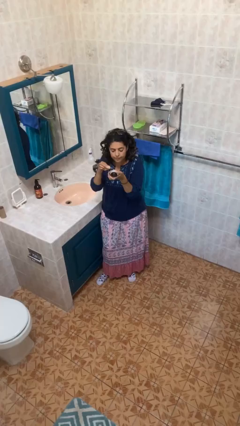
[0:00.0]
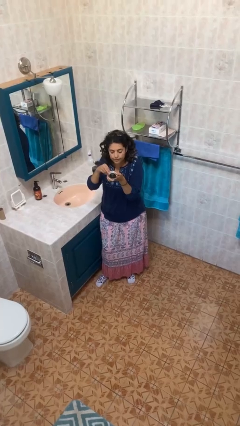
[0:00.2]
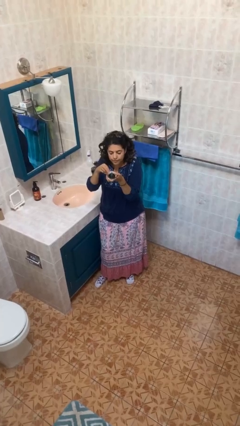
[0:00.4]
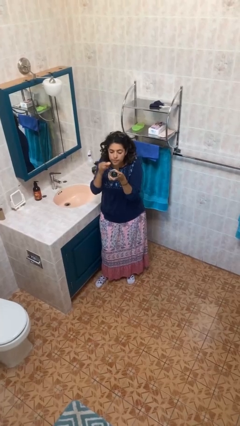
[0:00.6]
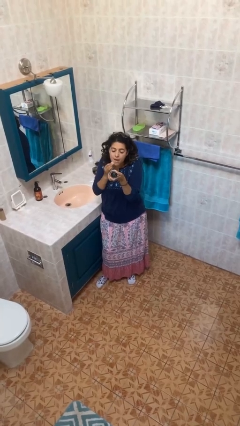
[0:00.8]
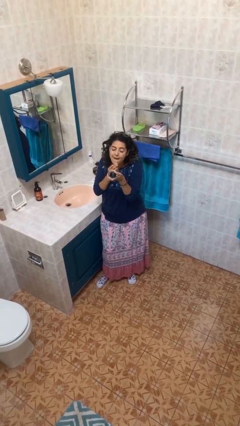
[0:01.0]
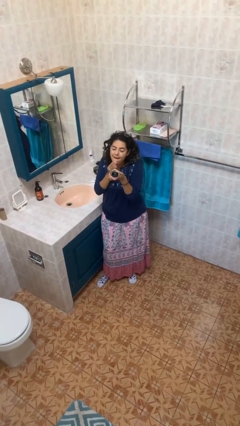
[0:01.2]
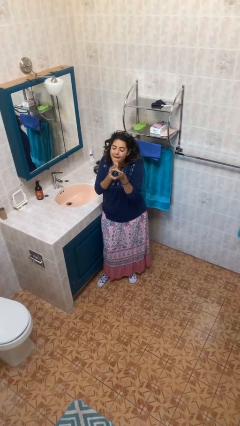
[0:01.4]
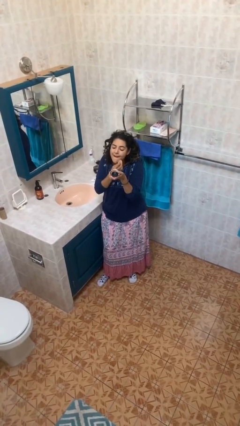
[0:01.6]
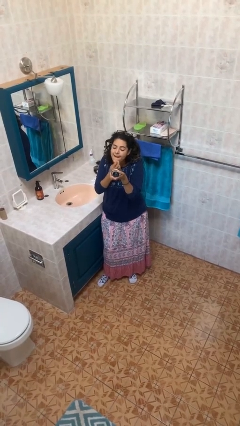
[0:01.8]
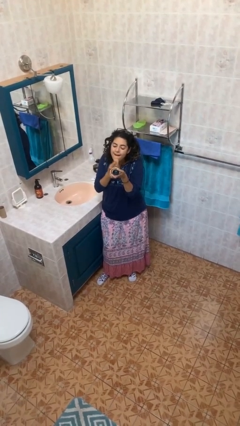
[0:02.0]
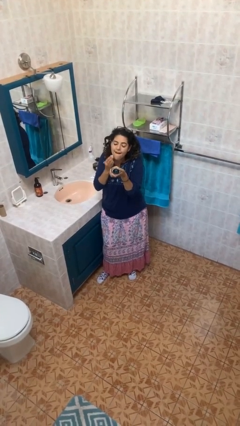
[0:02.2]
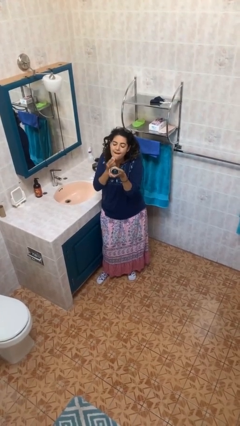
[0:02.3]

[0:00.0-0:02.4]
person applies foundation makeup

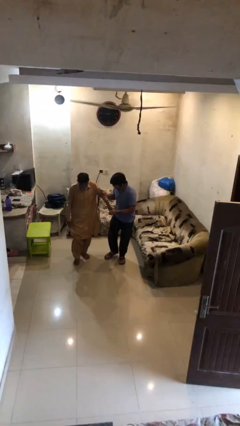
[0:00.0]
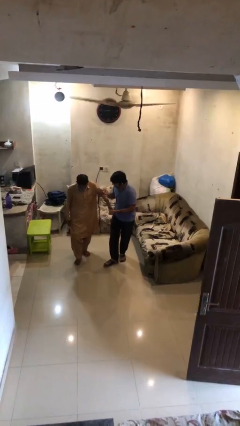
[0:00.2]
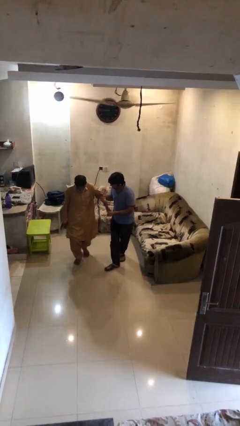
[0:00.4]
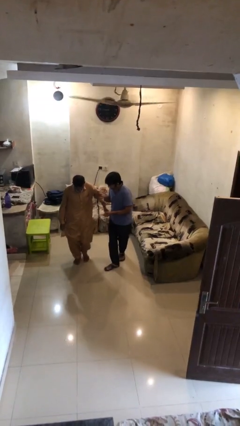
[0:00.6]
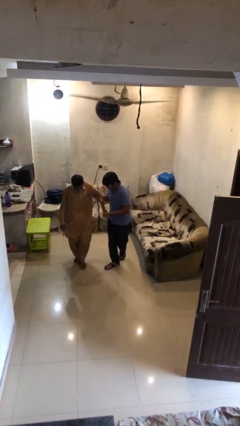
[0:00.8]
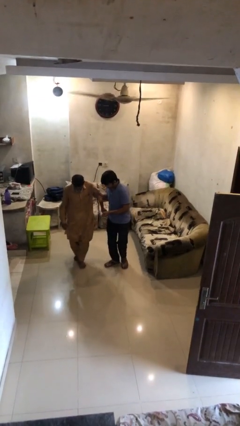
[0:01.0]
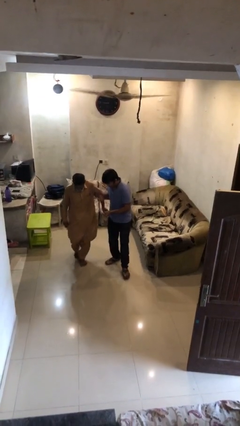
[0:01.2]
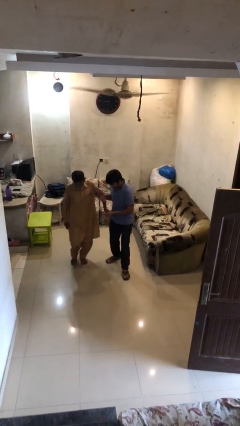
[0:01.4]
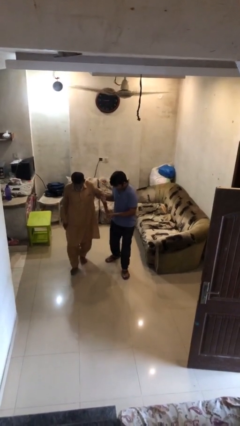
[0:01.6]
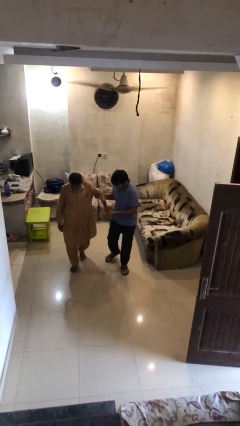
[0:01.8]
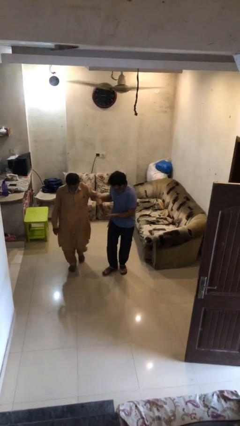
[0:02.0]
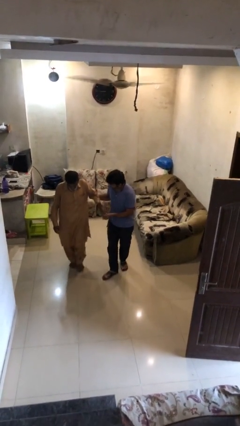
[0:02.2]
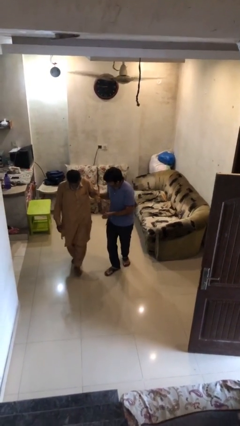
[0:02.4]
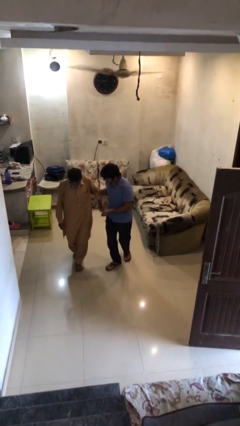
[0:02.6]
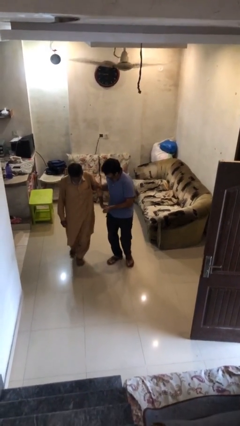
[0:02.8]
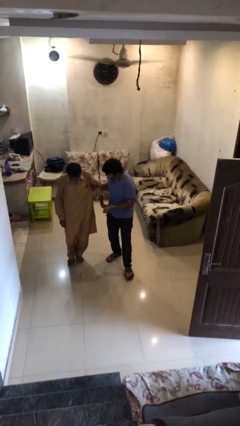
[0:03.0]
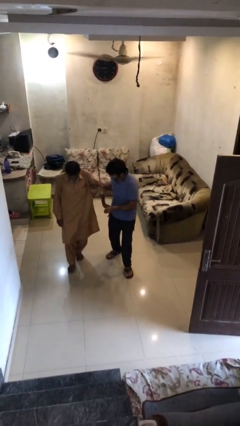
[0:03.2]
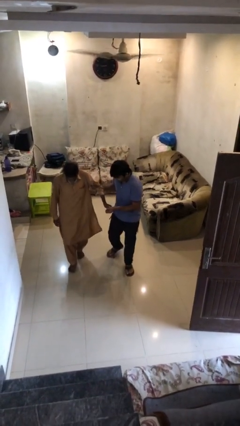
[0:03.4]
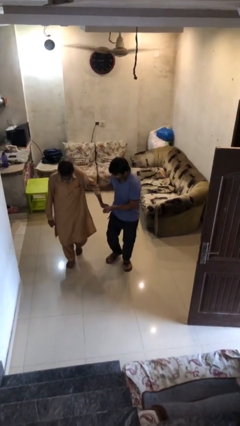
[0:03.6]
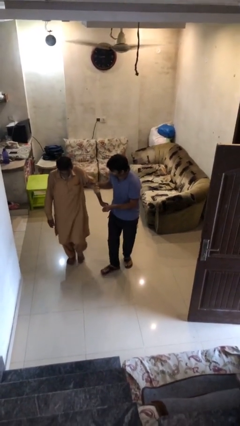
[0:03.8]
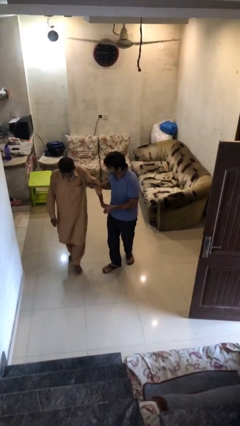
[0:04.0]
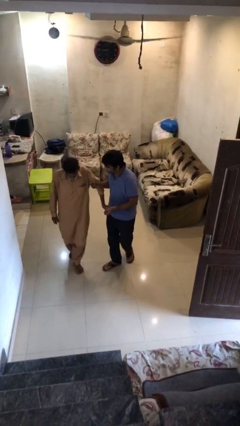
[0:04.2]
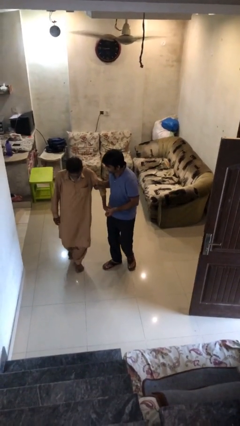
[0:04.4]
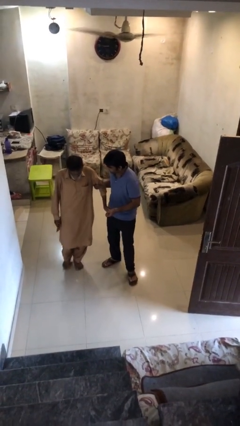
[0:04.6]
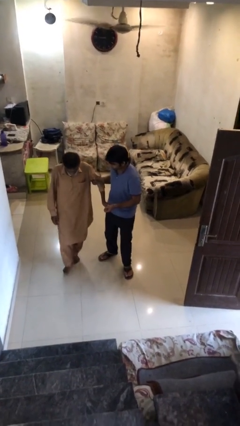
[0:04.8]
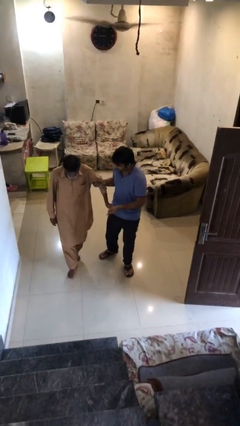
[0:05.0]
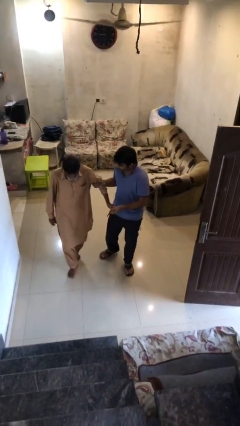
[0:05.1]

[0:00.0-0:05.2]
person holds hand

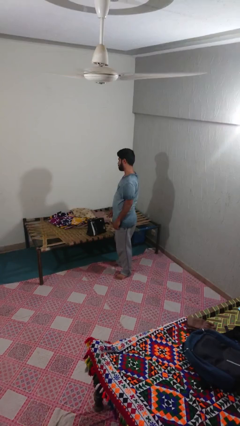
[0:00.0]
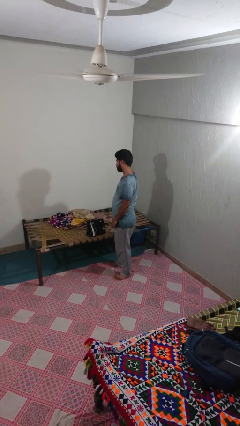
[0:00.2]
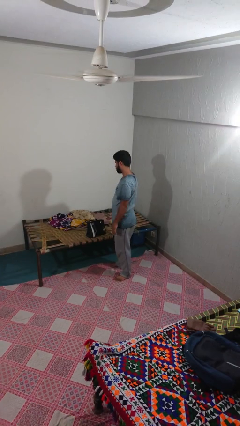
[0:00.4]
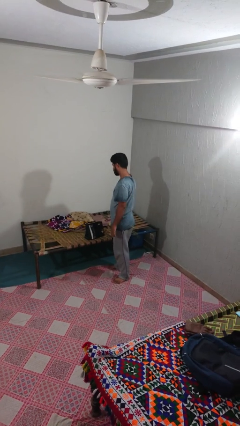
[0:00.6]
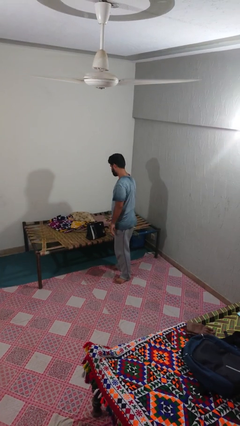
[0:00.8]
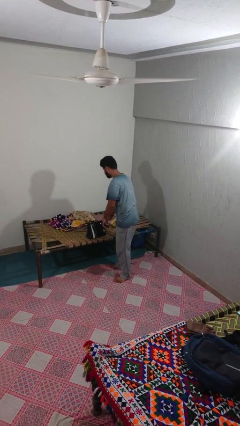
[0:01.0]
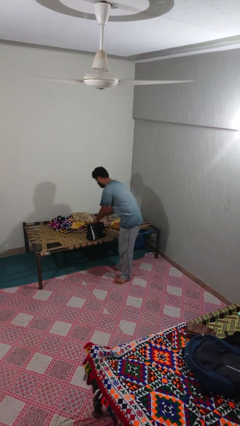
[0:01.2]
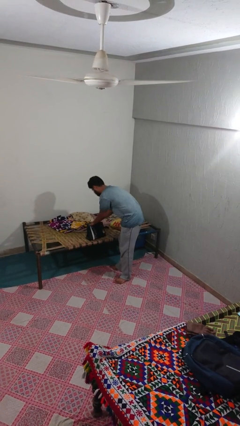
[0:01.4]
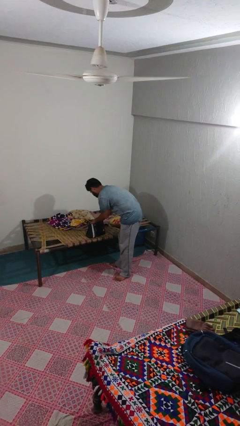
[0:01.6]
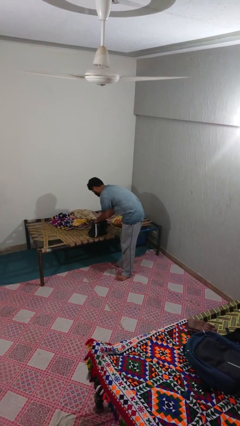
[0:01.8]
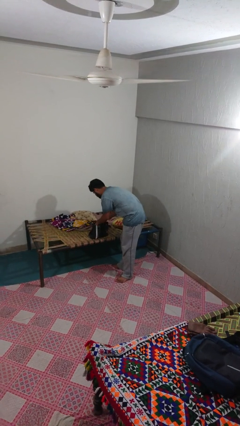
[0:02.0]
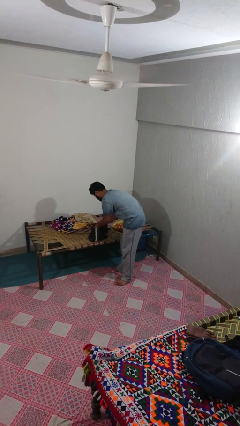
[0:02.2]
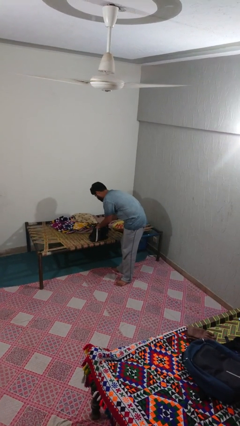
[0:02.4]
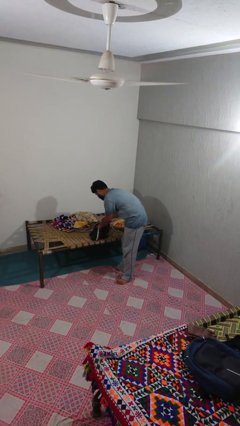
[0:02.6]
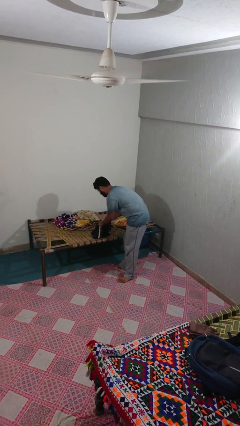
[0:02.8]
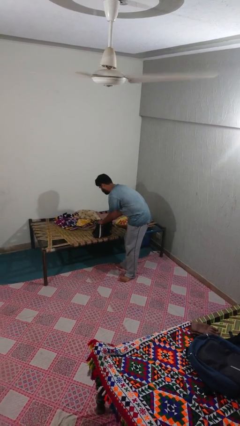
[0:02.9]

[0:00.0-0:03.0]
person searches in purse

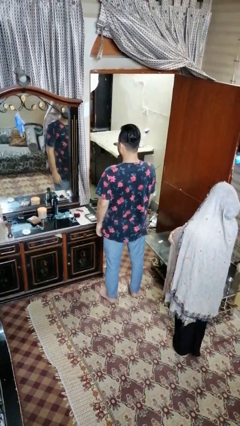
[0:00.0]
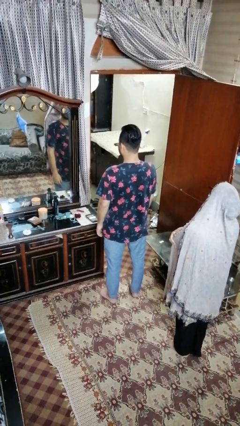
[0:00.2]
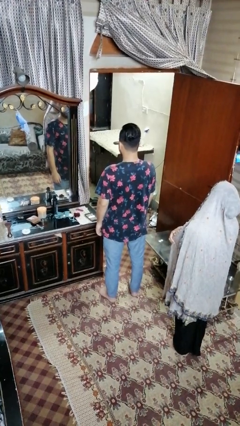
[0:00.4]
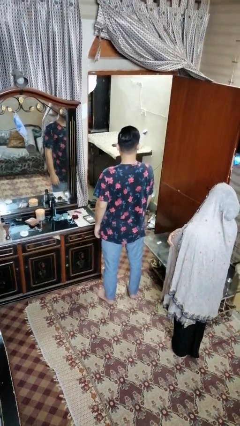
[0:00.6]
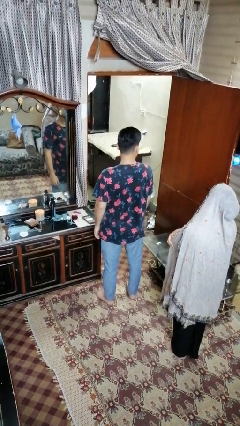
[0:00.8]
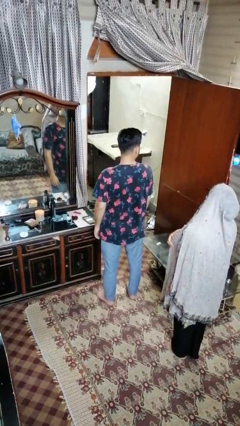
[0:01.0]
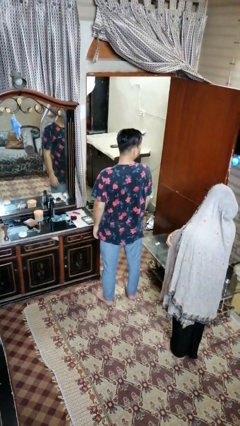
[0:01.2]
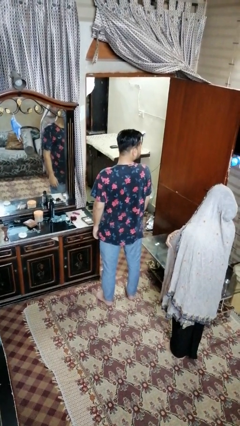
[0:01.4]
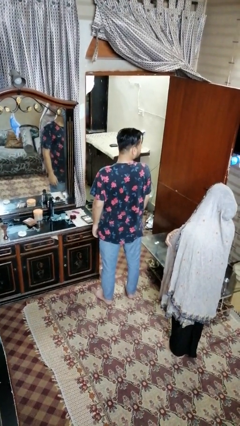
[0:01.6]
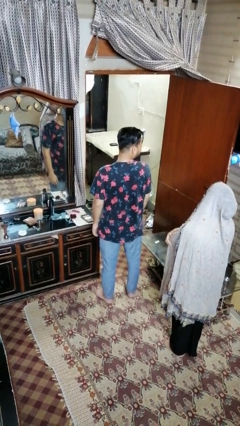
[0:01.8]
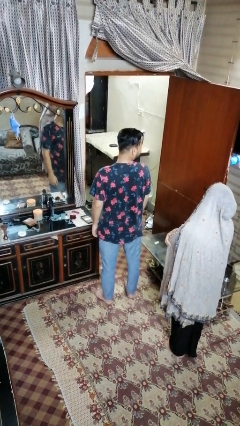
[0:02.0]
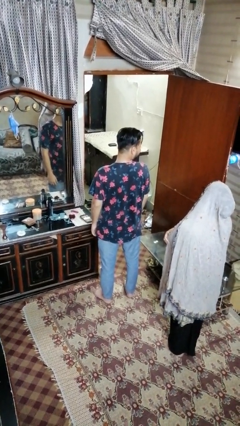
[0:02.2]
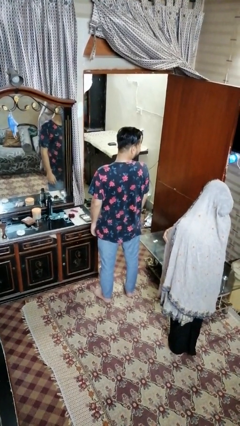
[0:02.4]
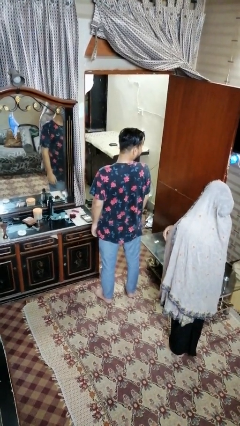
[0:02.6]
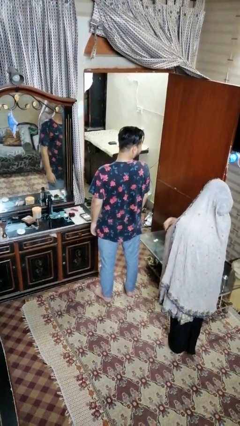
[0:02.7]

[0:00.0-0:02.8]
person looks over shoulder

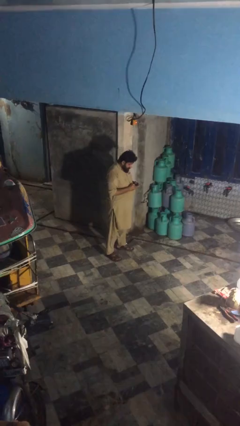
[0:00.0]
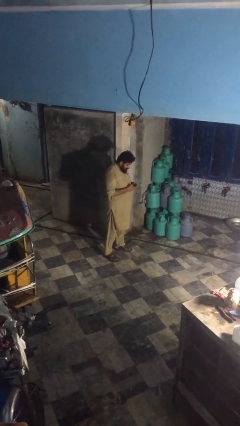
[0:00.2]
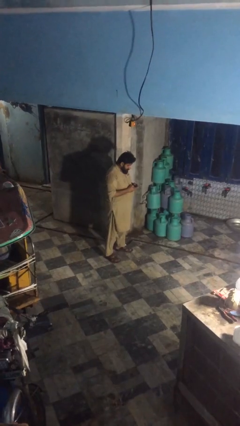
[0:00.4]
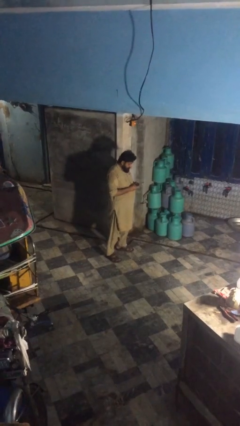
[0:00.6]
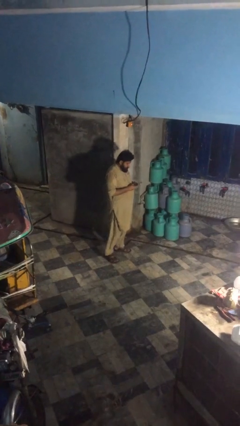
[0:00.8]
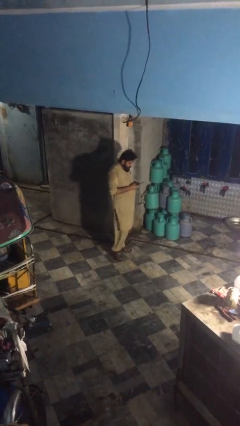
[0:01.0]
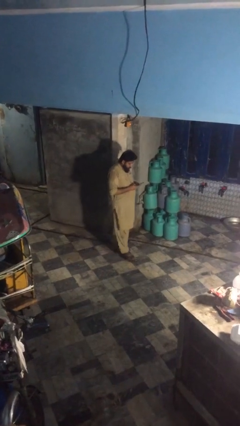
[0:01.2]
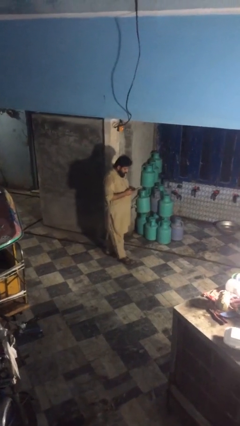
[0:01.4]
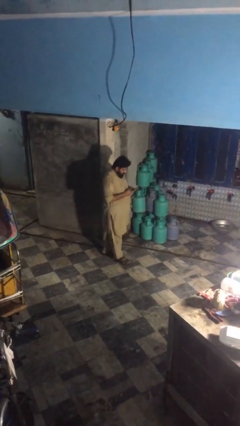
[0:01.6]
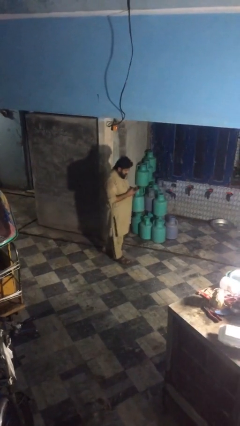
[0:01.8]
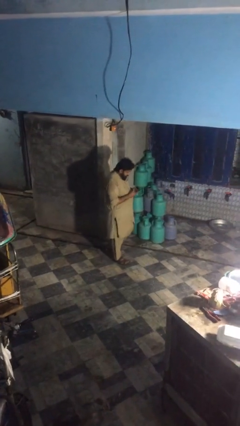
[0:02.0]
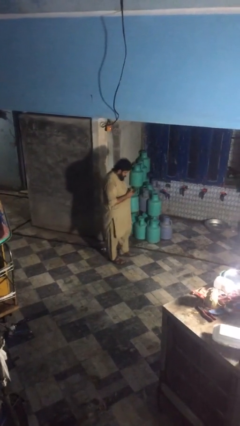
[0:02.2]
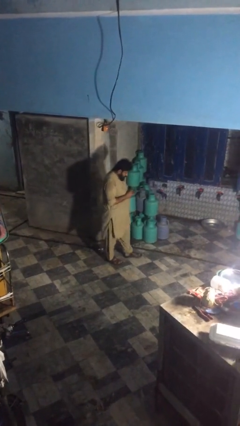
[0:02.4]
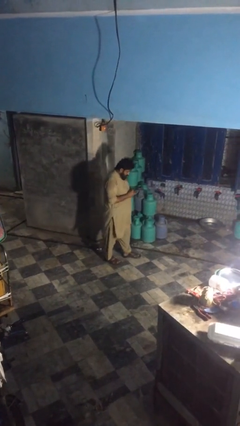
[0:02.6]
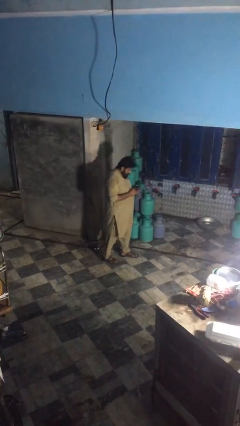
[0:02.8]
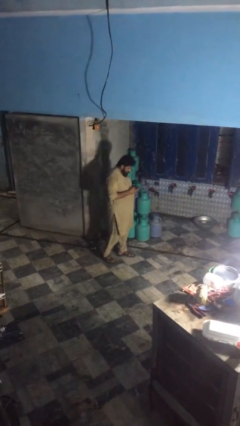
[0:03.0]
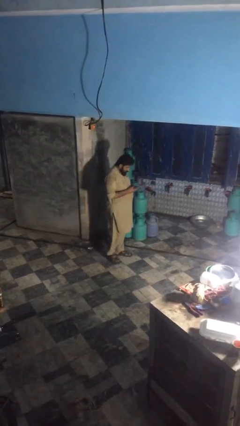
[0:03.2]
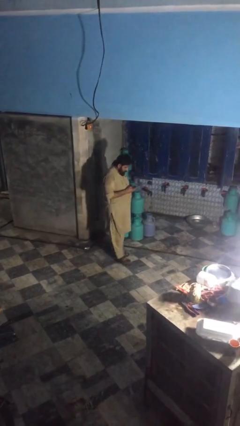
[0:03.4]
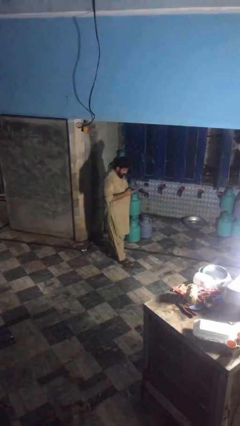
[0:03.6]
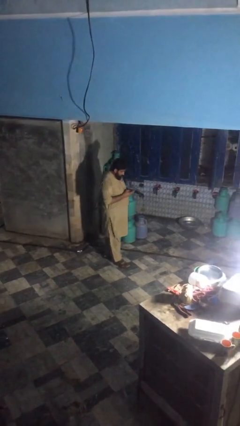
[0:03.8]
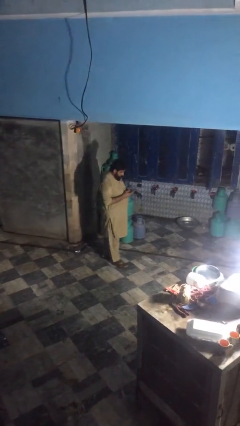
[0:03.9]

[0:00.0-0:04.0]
person texts on phone
